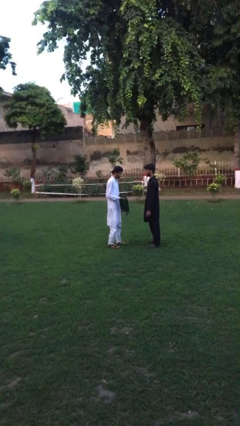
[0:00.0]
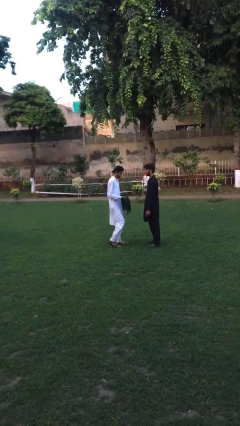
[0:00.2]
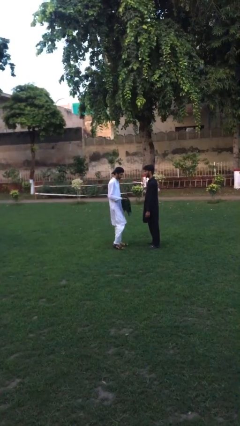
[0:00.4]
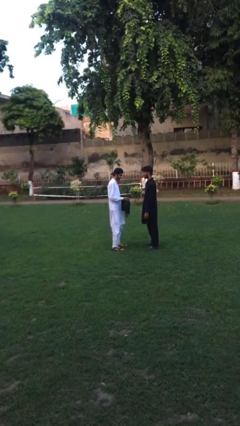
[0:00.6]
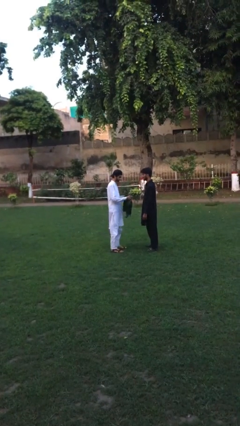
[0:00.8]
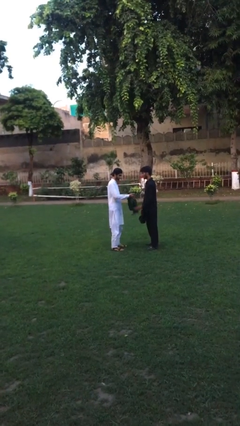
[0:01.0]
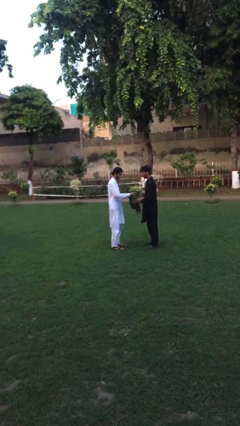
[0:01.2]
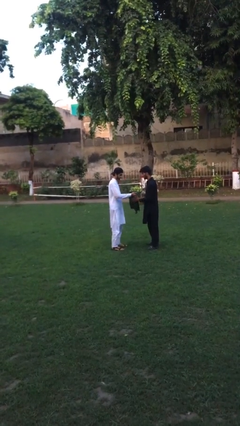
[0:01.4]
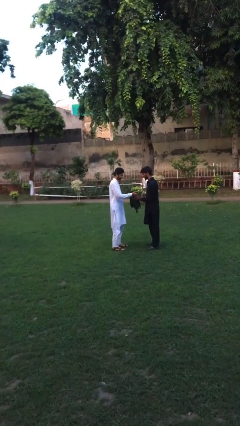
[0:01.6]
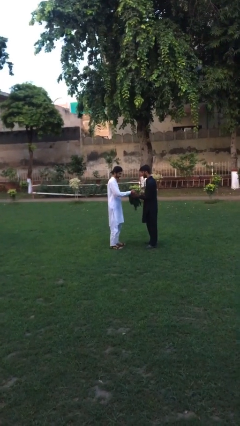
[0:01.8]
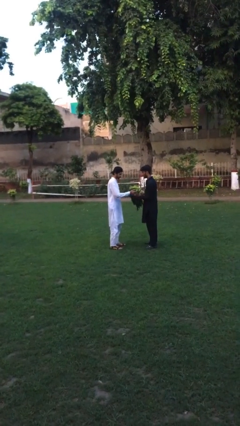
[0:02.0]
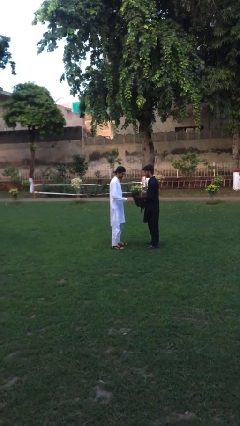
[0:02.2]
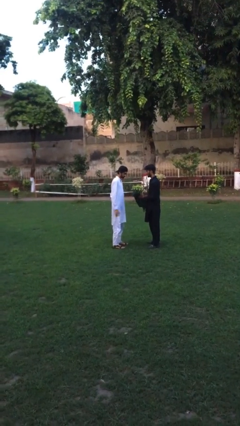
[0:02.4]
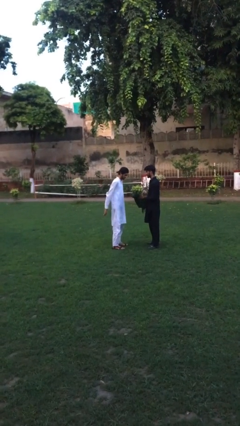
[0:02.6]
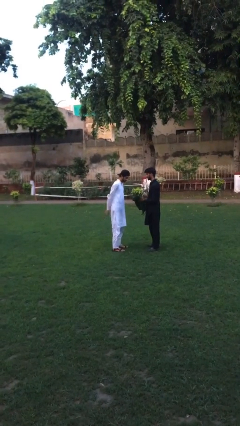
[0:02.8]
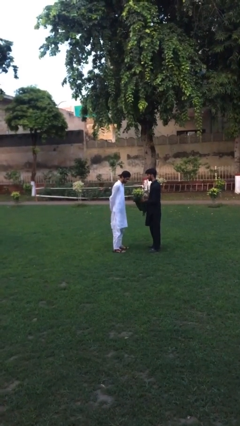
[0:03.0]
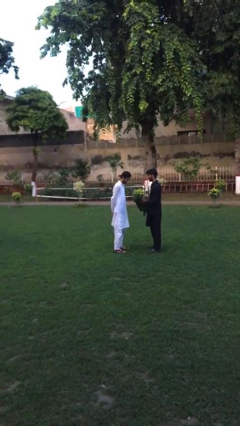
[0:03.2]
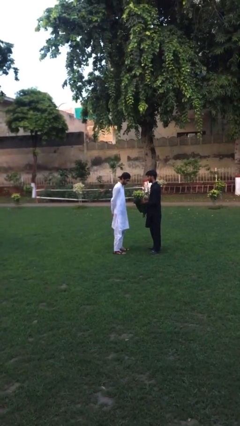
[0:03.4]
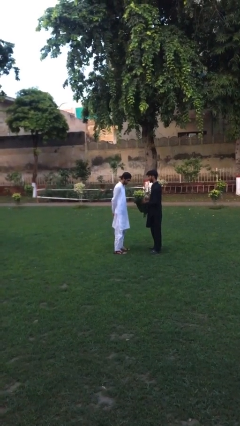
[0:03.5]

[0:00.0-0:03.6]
person transfers object to person

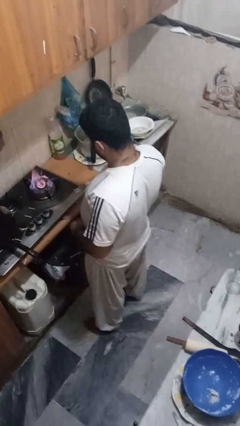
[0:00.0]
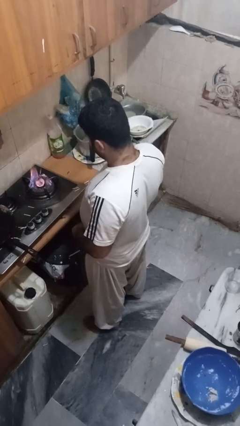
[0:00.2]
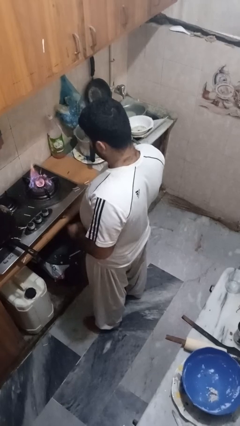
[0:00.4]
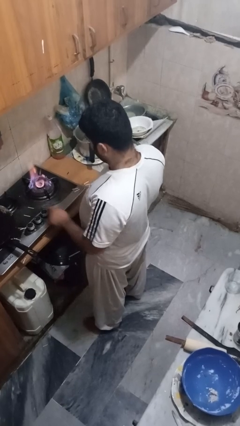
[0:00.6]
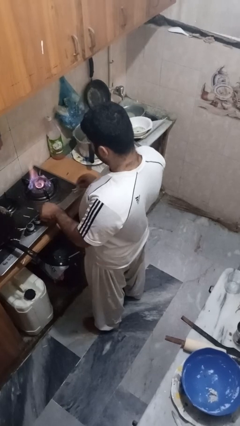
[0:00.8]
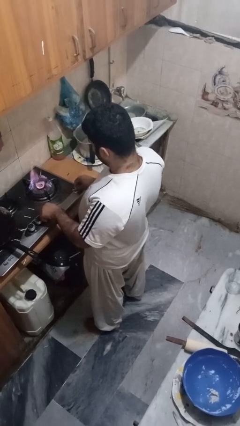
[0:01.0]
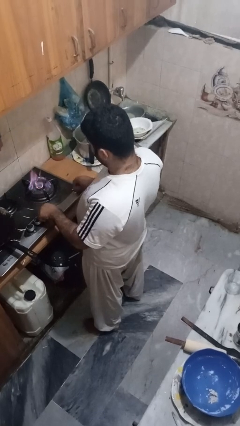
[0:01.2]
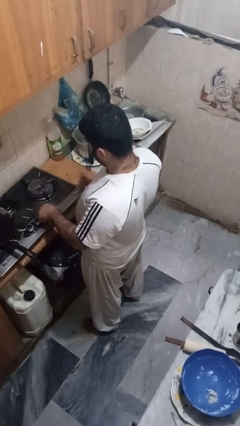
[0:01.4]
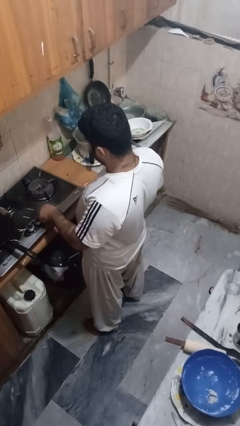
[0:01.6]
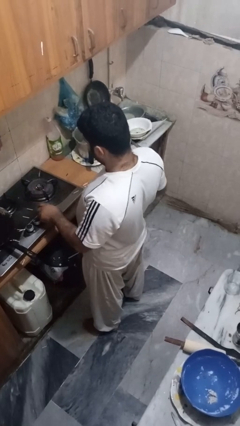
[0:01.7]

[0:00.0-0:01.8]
person turns off stovetop

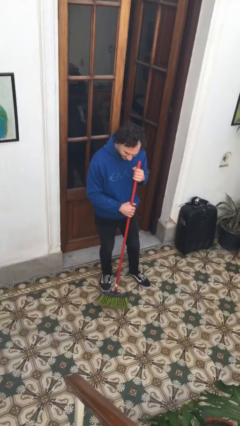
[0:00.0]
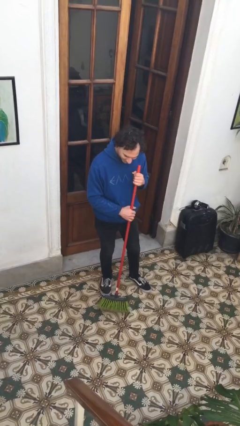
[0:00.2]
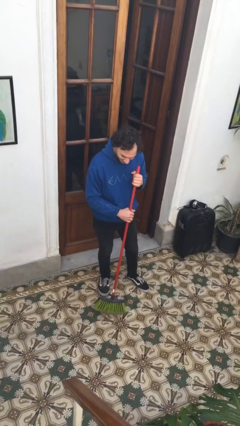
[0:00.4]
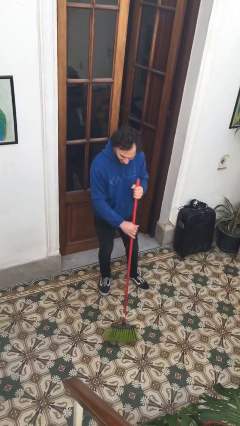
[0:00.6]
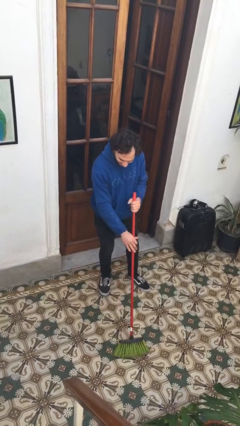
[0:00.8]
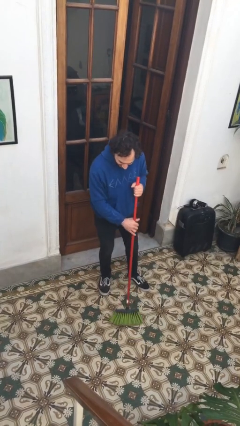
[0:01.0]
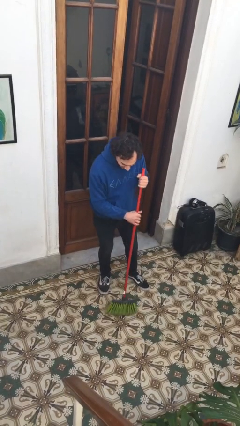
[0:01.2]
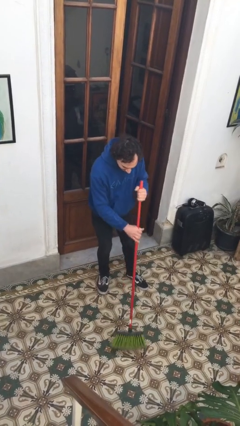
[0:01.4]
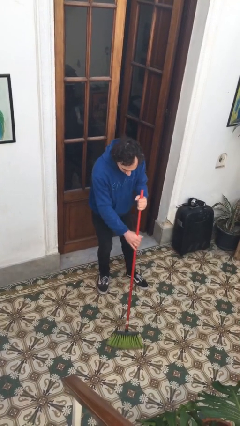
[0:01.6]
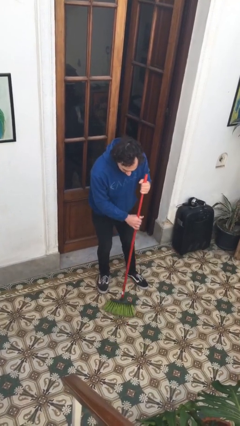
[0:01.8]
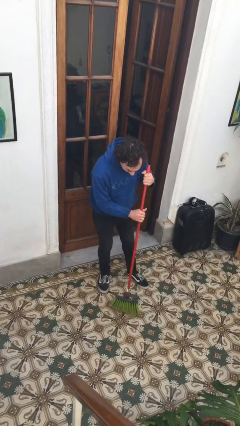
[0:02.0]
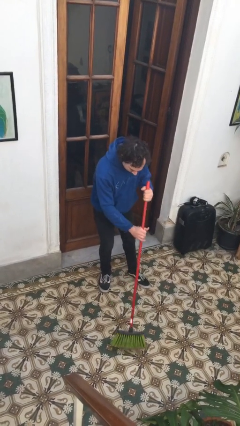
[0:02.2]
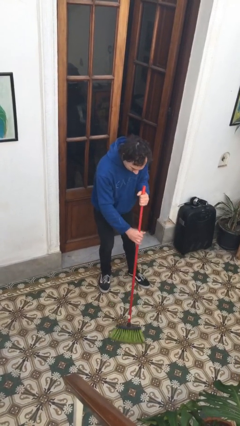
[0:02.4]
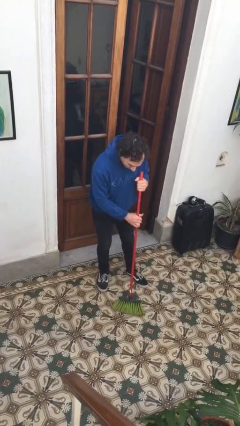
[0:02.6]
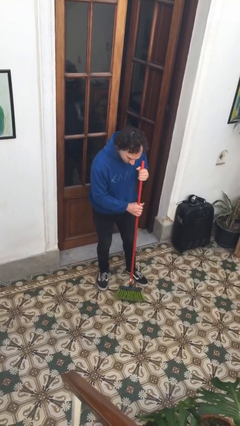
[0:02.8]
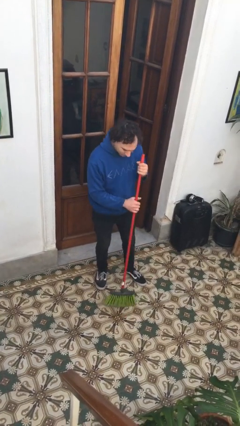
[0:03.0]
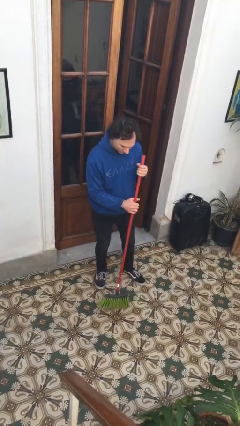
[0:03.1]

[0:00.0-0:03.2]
person sweeps floor

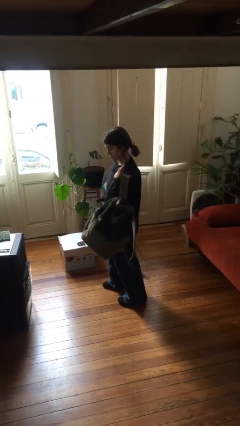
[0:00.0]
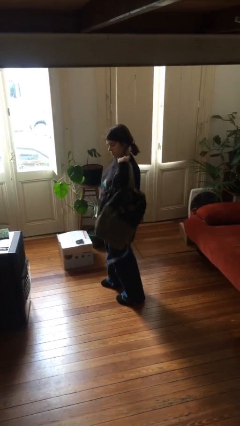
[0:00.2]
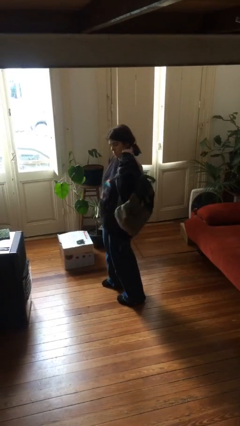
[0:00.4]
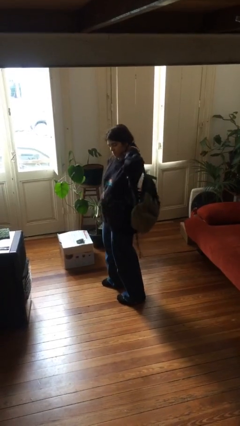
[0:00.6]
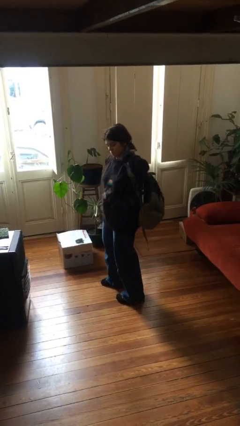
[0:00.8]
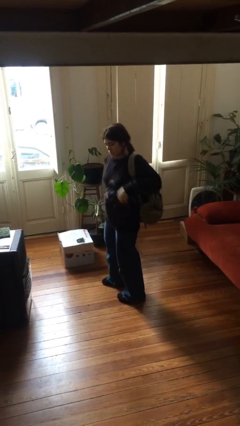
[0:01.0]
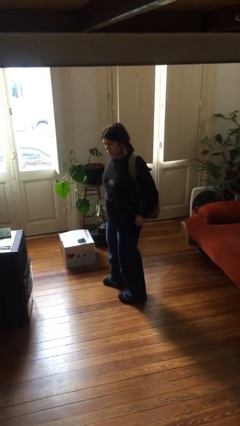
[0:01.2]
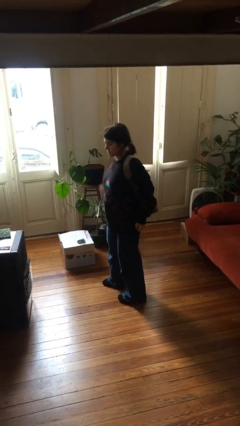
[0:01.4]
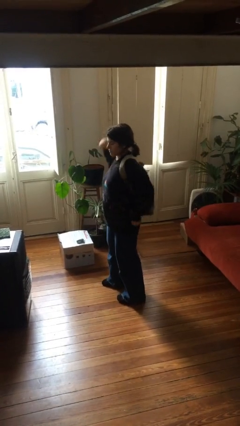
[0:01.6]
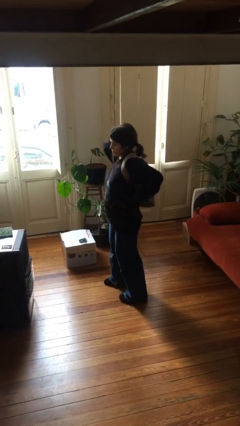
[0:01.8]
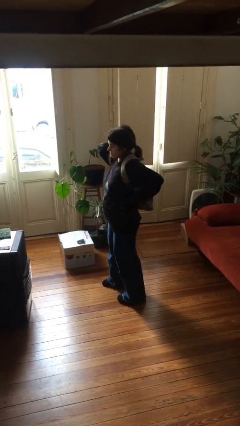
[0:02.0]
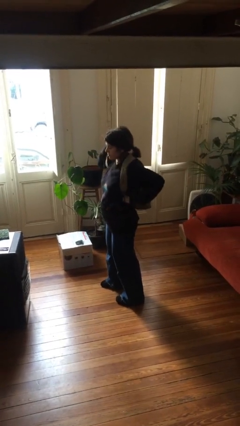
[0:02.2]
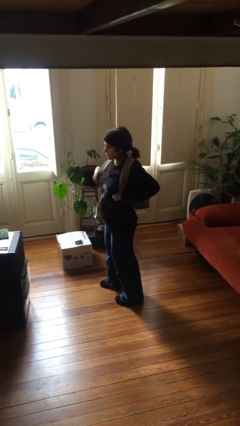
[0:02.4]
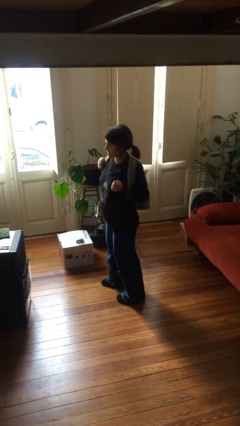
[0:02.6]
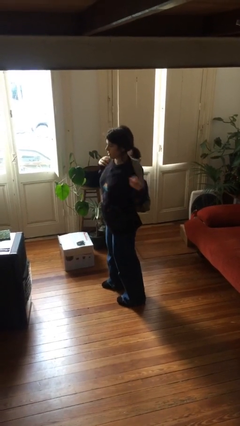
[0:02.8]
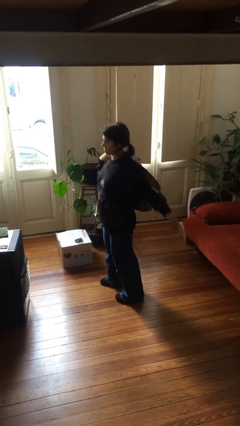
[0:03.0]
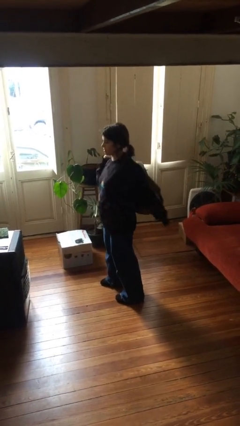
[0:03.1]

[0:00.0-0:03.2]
person puts on backpack

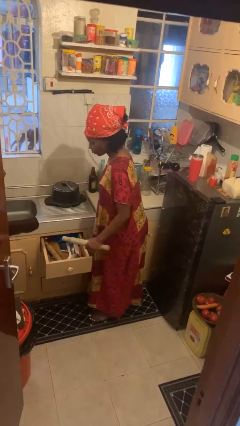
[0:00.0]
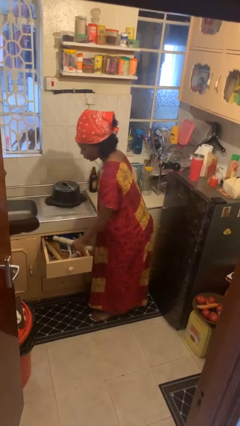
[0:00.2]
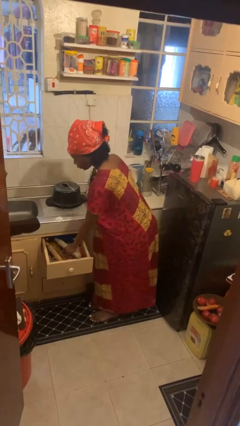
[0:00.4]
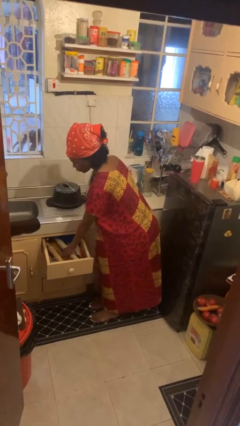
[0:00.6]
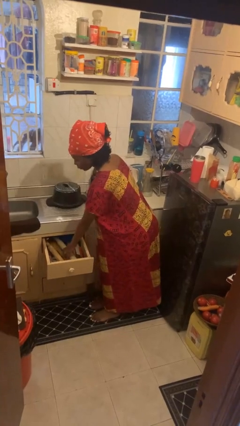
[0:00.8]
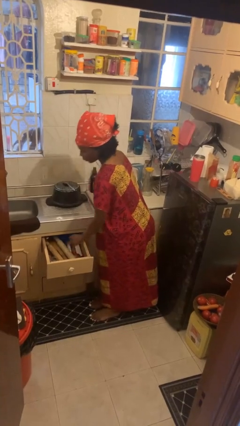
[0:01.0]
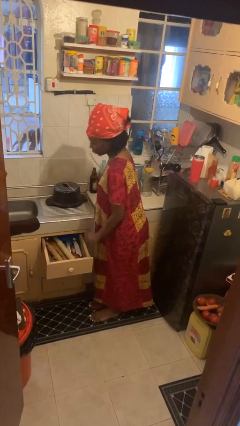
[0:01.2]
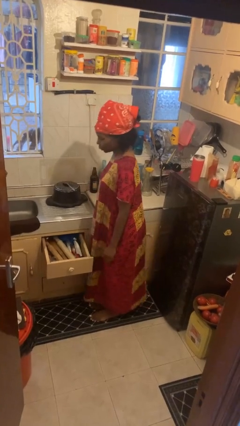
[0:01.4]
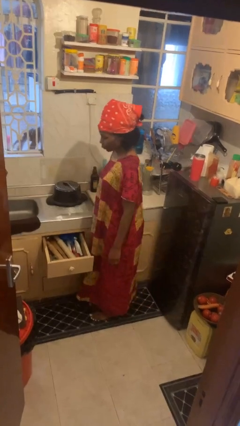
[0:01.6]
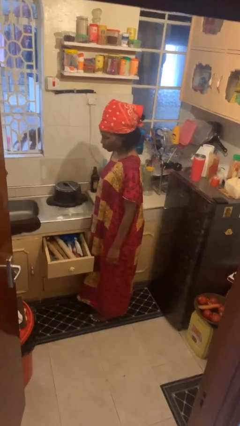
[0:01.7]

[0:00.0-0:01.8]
person puts object into kitchen drawer

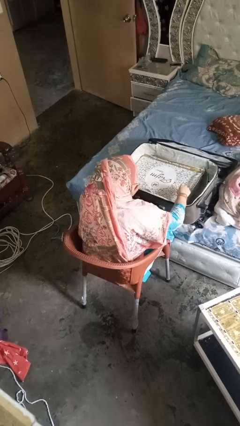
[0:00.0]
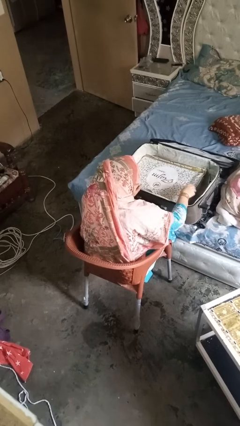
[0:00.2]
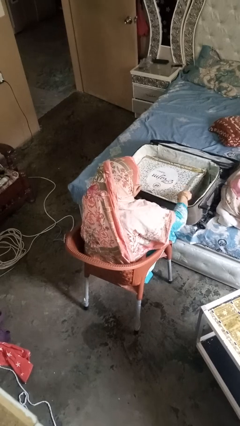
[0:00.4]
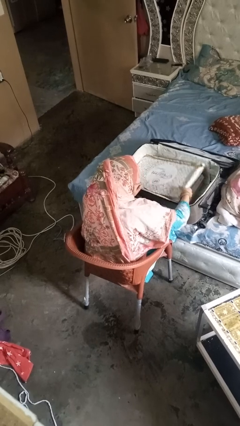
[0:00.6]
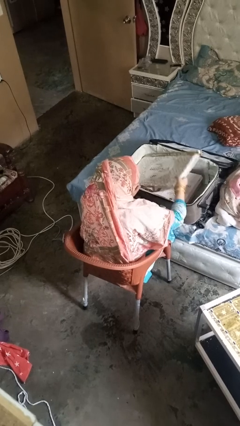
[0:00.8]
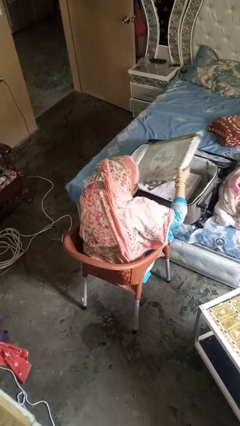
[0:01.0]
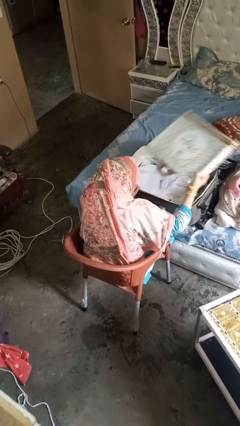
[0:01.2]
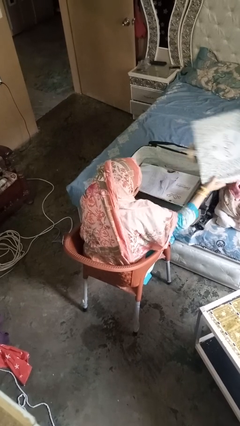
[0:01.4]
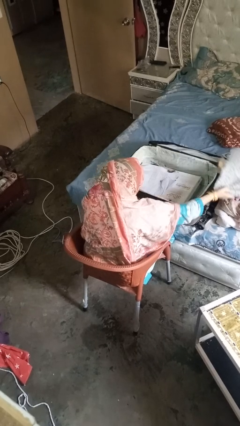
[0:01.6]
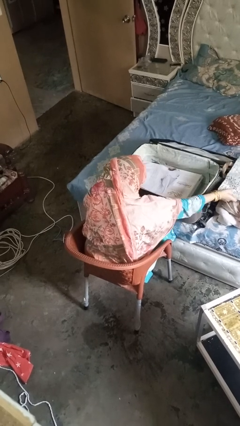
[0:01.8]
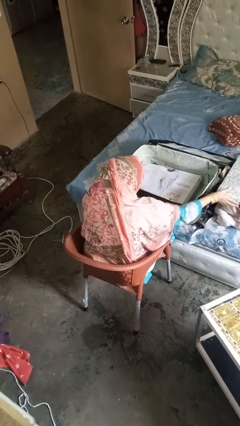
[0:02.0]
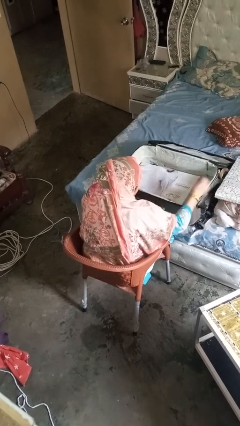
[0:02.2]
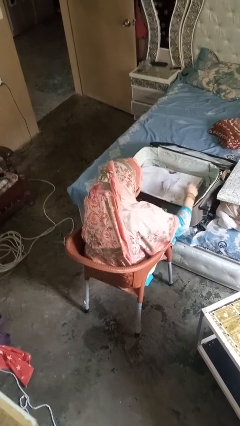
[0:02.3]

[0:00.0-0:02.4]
person unloads clothes from suitcase

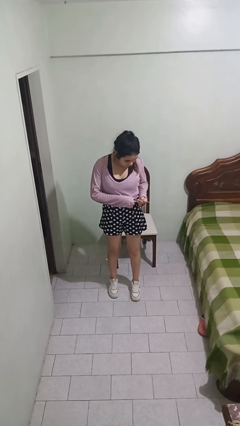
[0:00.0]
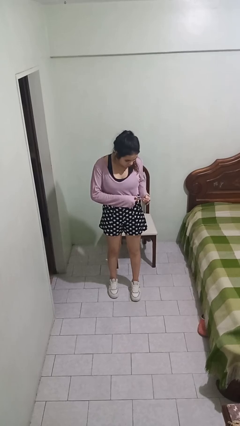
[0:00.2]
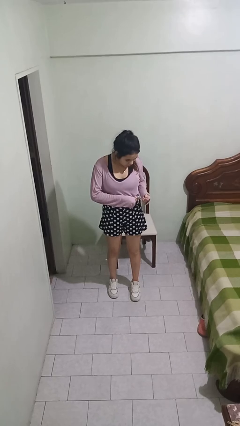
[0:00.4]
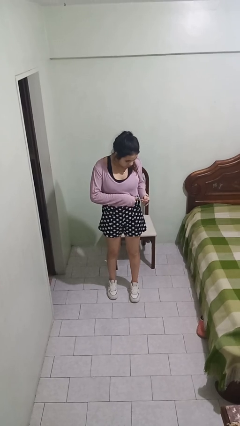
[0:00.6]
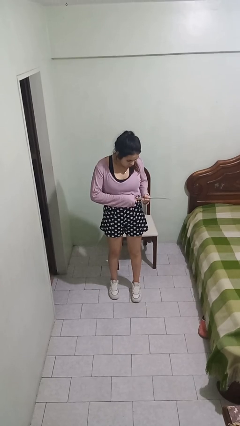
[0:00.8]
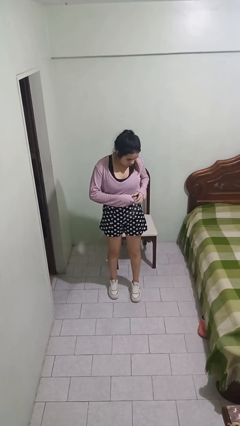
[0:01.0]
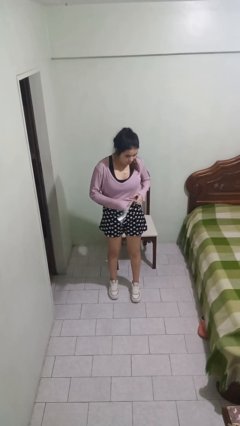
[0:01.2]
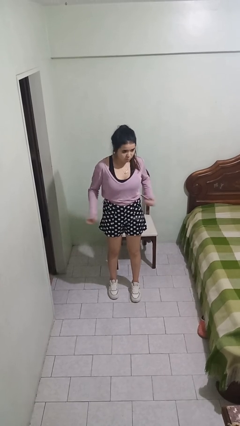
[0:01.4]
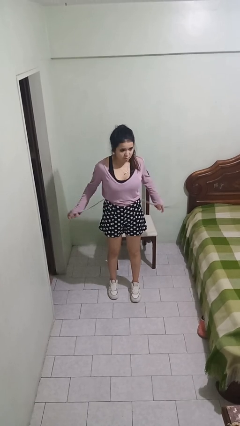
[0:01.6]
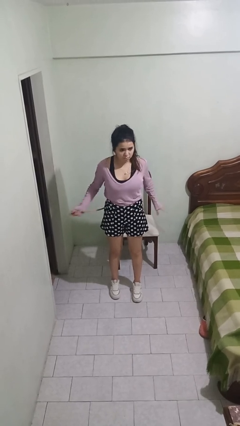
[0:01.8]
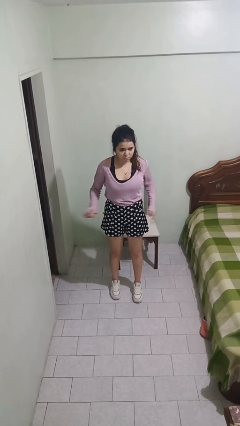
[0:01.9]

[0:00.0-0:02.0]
person takes off belt
